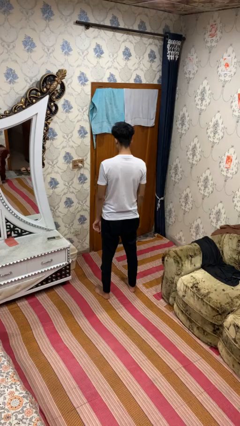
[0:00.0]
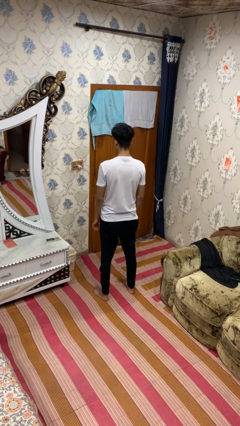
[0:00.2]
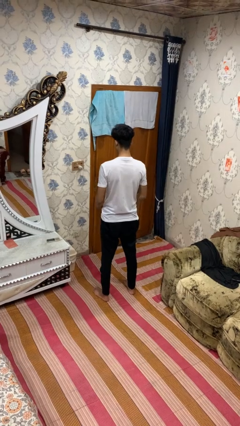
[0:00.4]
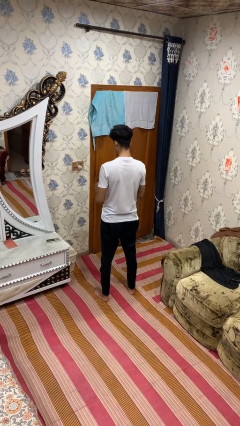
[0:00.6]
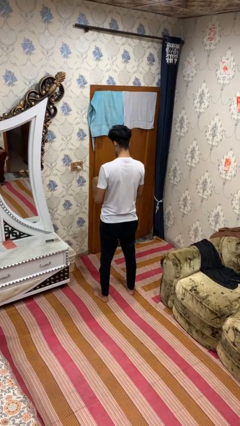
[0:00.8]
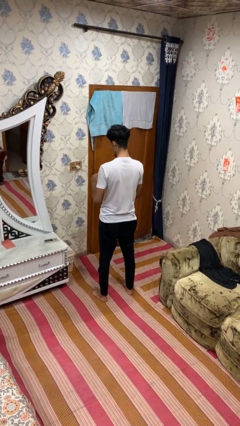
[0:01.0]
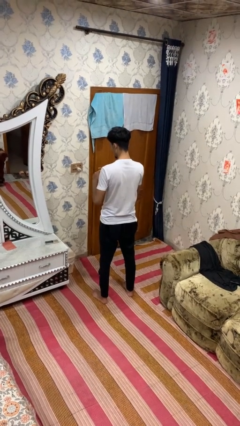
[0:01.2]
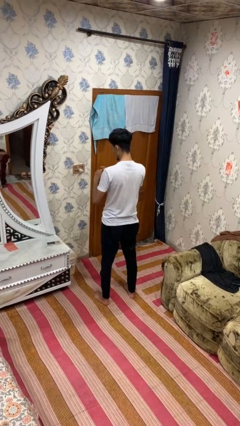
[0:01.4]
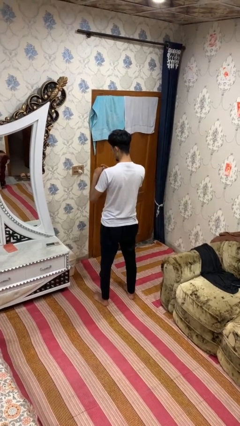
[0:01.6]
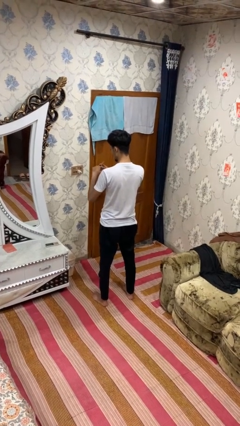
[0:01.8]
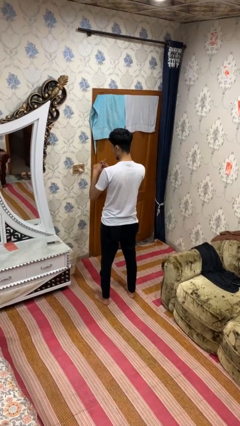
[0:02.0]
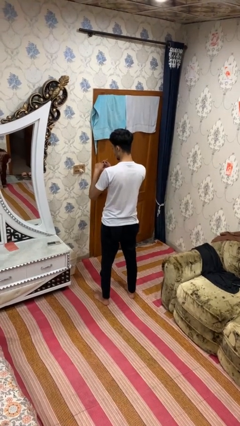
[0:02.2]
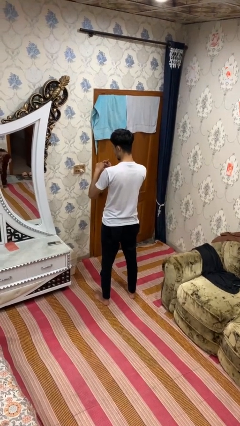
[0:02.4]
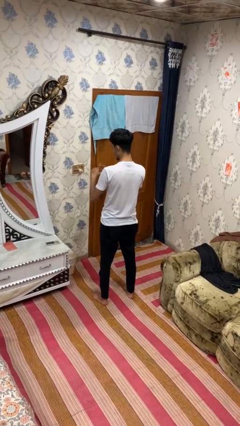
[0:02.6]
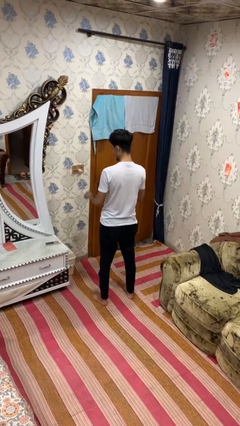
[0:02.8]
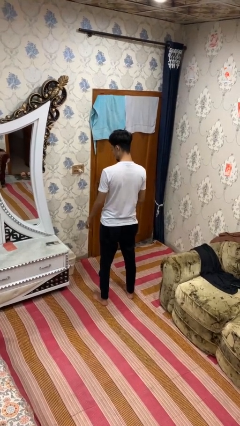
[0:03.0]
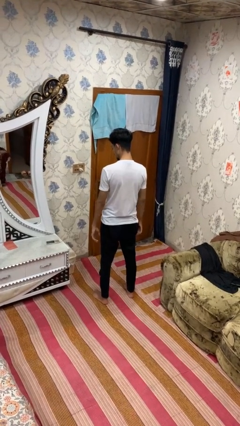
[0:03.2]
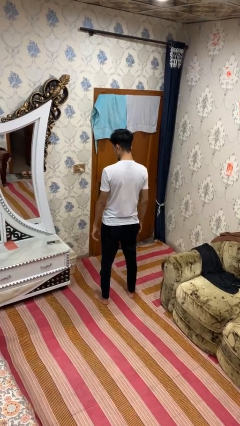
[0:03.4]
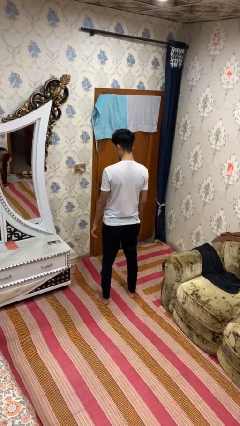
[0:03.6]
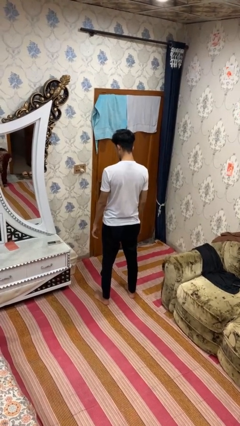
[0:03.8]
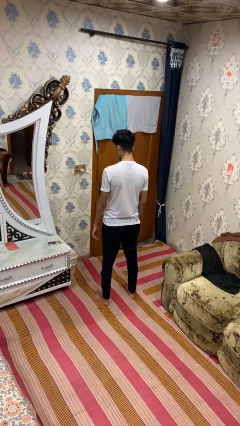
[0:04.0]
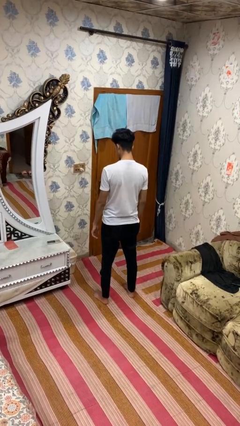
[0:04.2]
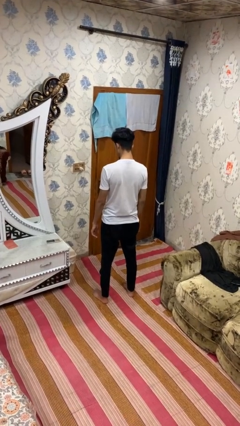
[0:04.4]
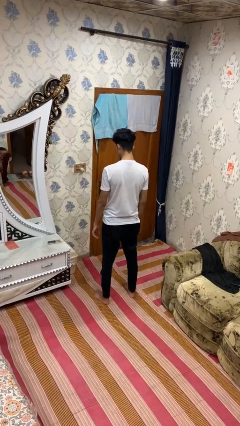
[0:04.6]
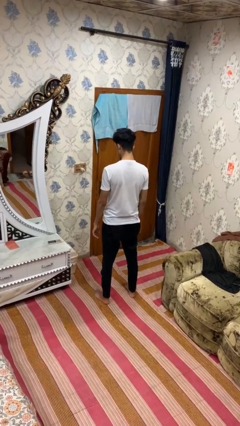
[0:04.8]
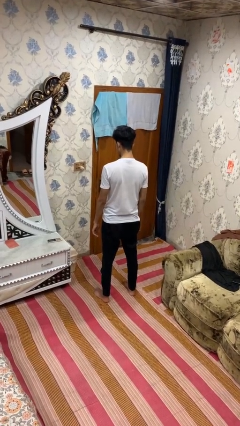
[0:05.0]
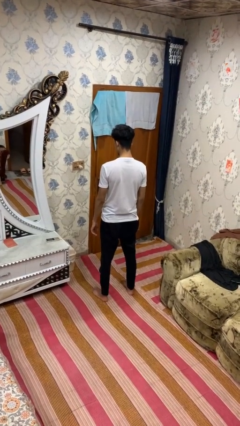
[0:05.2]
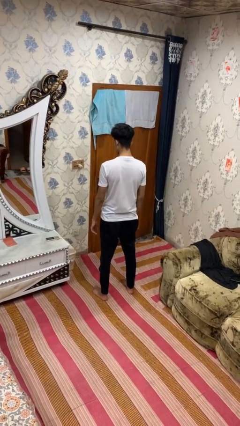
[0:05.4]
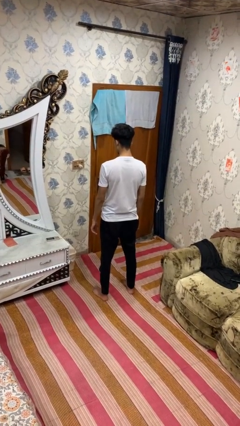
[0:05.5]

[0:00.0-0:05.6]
person puts on ring

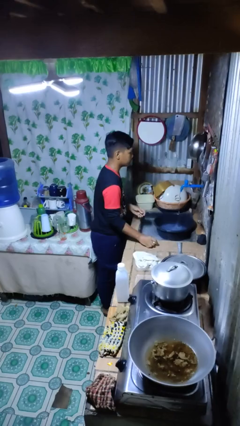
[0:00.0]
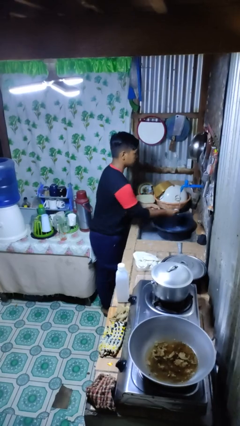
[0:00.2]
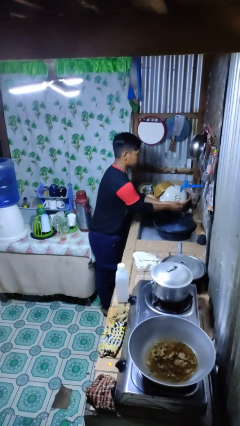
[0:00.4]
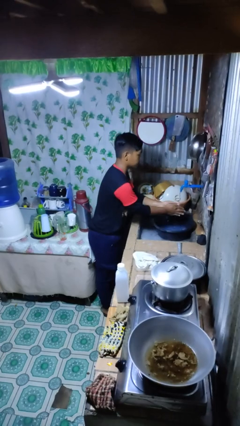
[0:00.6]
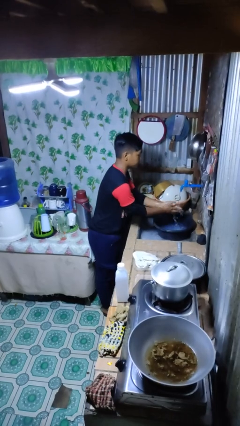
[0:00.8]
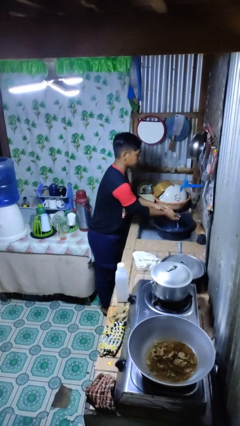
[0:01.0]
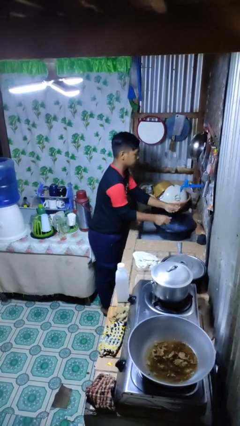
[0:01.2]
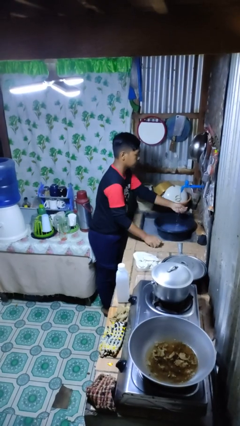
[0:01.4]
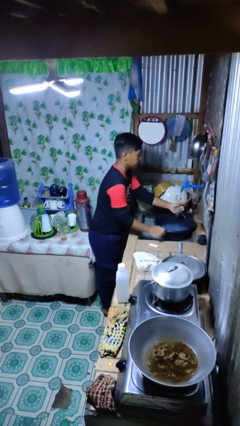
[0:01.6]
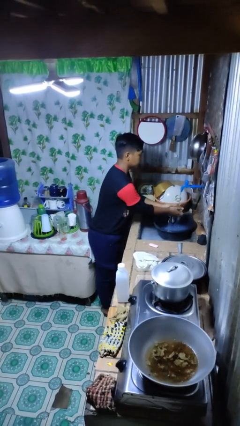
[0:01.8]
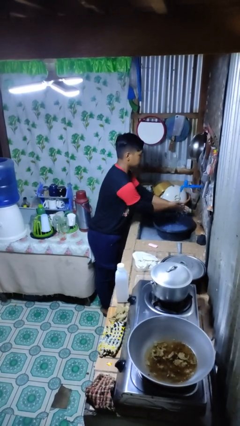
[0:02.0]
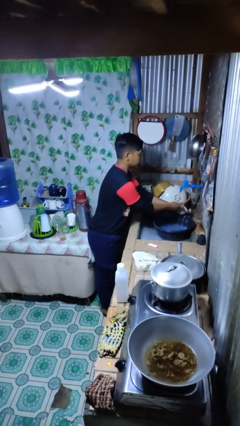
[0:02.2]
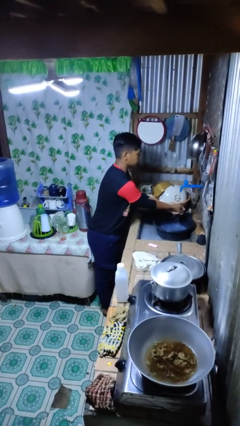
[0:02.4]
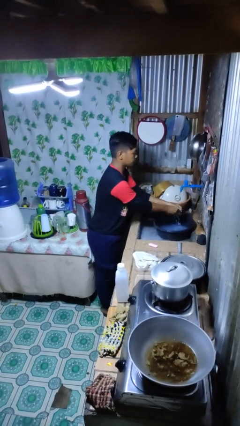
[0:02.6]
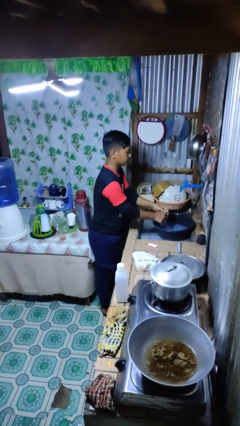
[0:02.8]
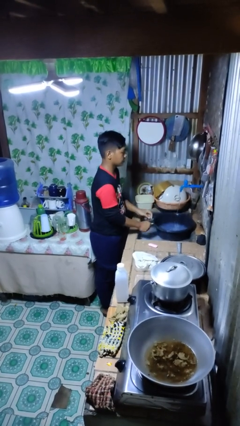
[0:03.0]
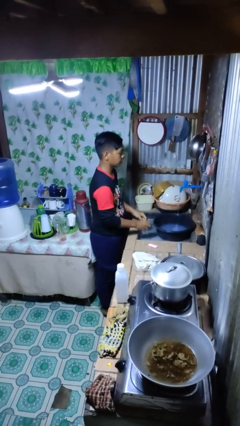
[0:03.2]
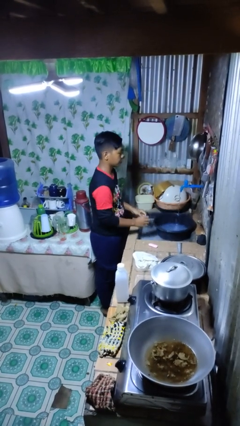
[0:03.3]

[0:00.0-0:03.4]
person washes hands

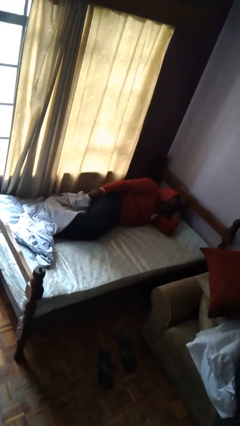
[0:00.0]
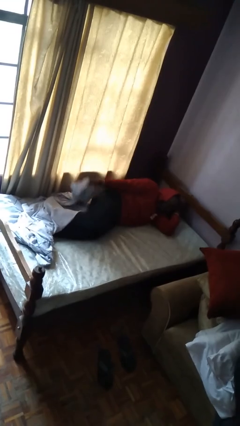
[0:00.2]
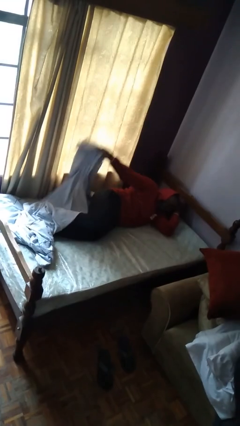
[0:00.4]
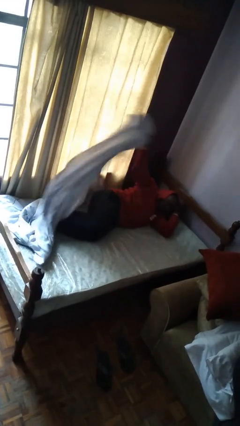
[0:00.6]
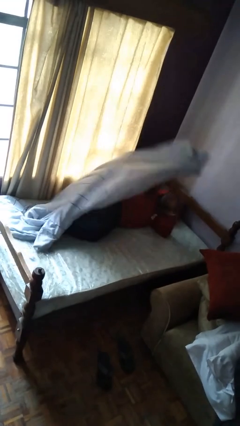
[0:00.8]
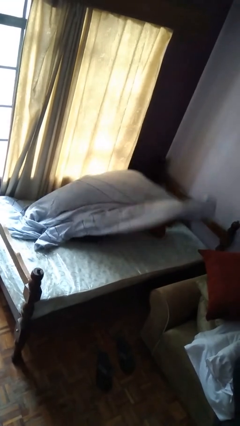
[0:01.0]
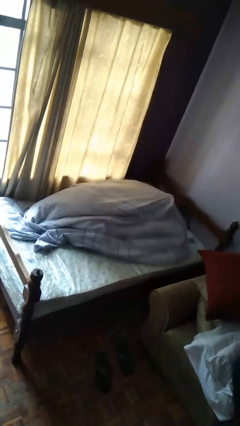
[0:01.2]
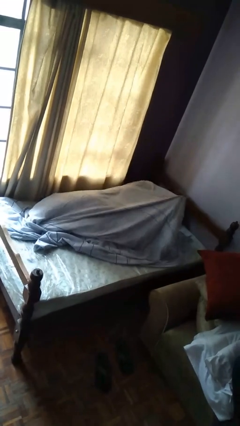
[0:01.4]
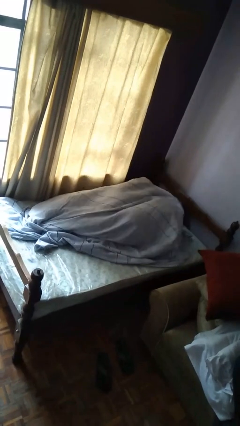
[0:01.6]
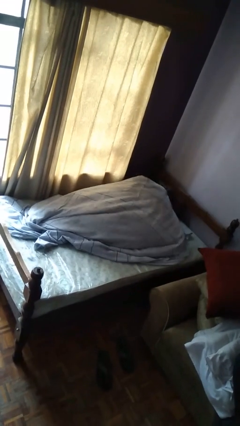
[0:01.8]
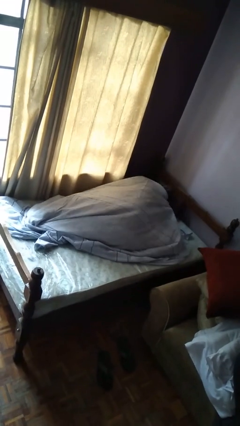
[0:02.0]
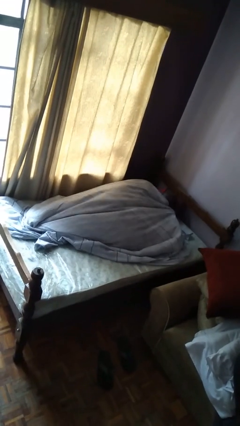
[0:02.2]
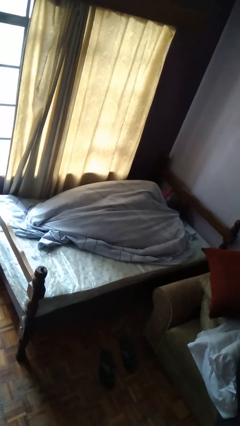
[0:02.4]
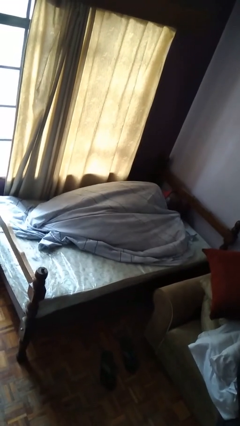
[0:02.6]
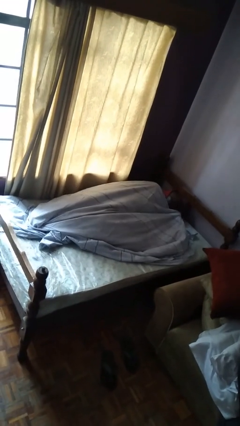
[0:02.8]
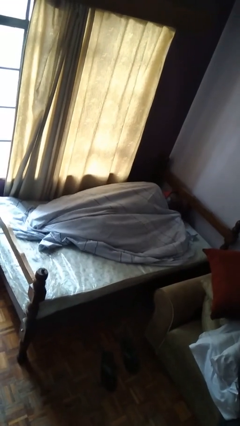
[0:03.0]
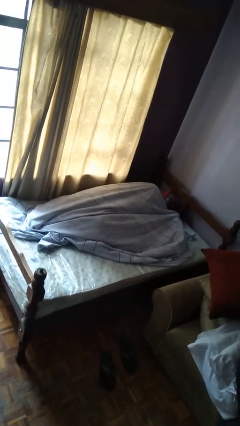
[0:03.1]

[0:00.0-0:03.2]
person covers with bedsheets

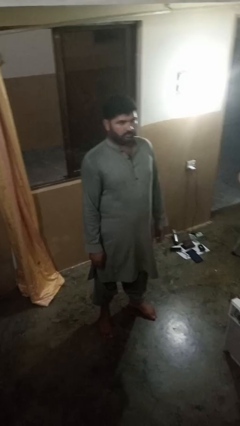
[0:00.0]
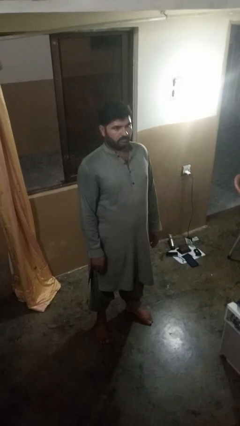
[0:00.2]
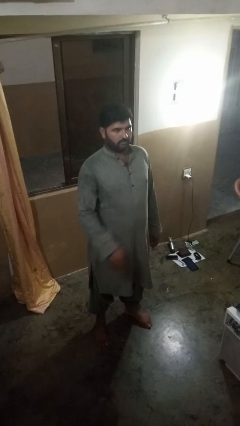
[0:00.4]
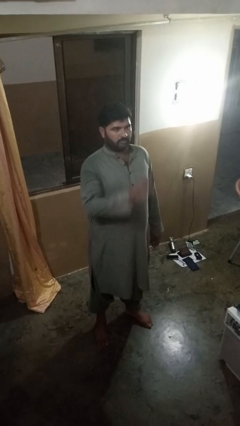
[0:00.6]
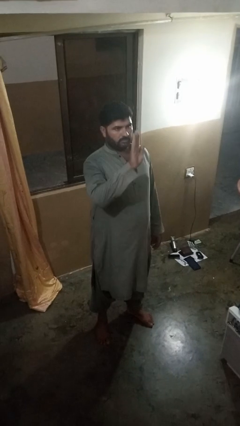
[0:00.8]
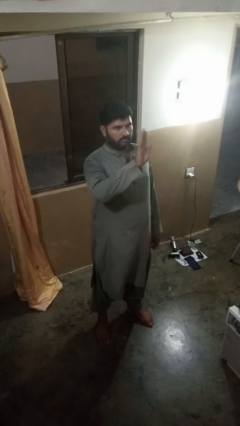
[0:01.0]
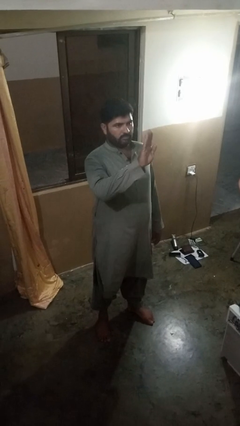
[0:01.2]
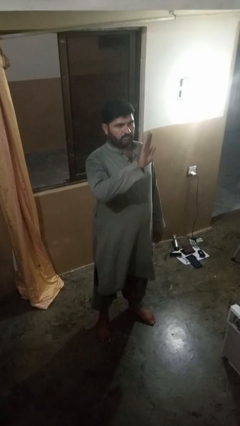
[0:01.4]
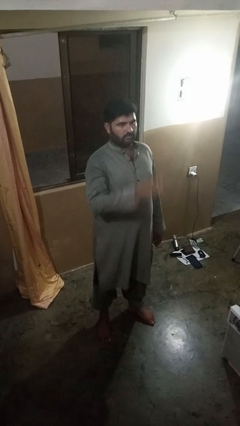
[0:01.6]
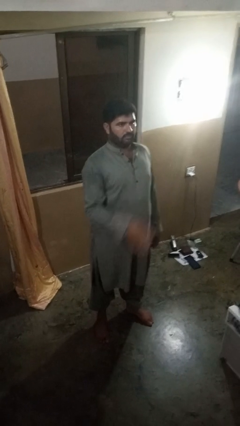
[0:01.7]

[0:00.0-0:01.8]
person gestures stop

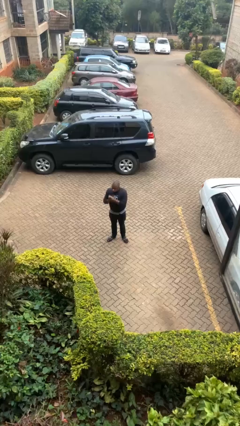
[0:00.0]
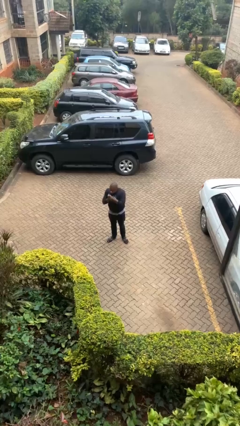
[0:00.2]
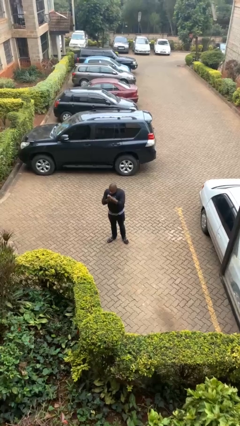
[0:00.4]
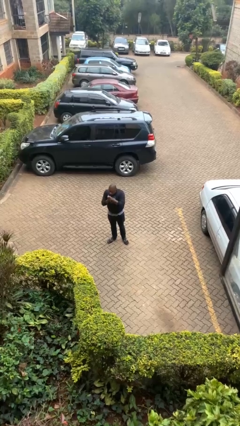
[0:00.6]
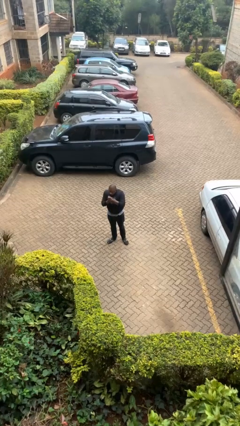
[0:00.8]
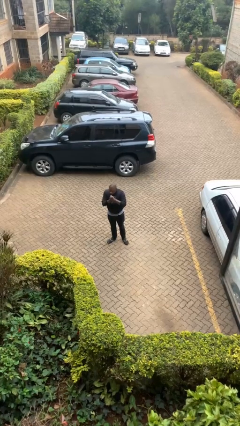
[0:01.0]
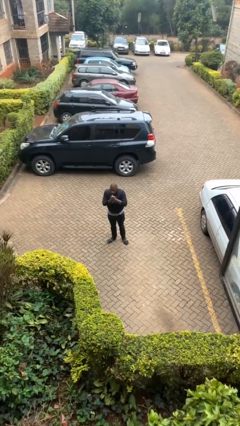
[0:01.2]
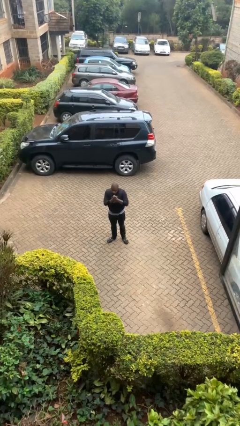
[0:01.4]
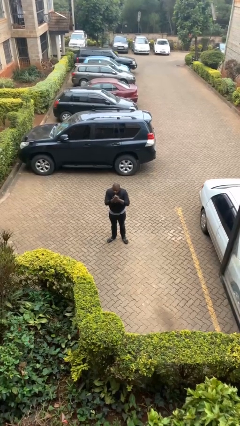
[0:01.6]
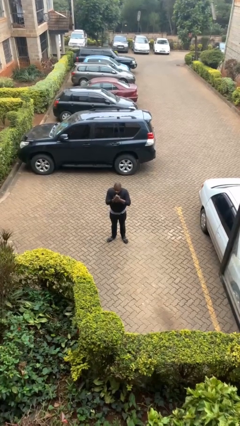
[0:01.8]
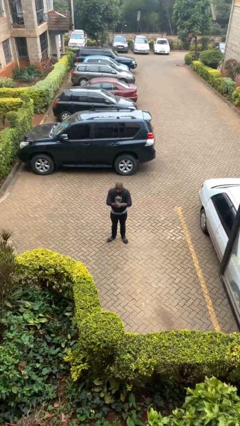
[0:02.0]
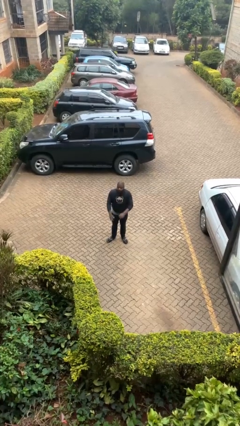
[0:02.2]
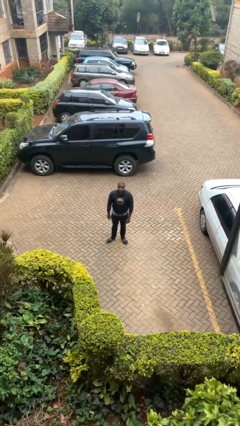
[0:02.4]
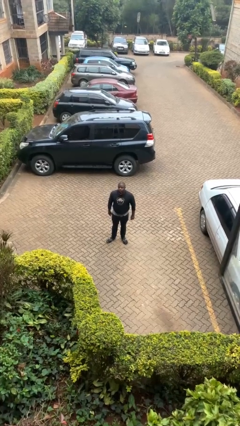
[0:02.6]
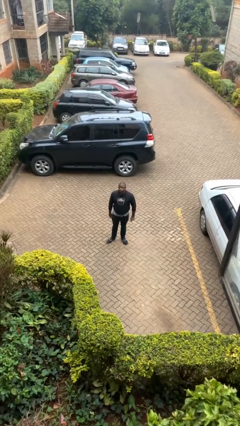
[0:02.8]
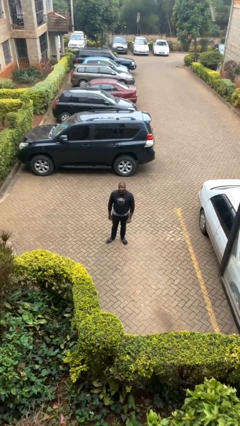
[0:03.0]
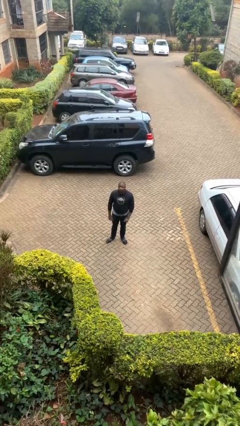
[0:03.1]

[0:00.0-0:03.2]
person blows into hands

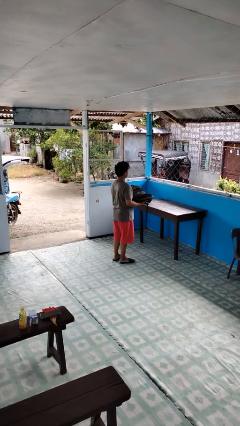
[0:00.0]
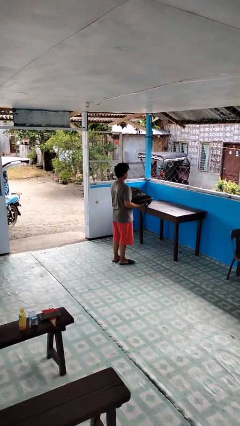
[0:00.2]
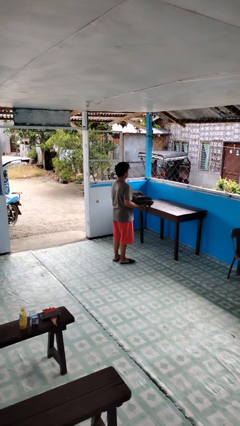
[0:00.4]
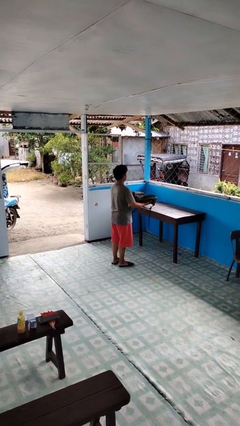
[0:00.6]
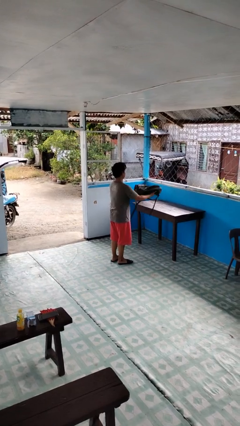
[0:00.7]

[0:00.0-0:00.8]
person throws object on table
